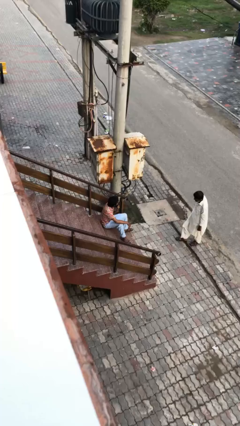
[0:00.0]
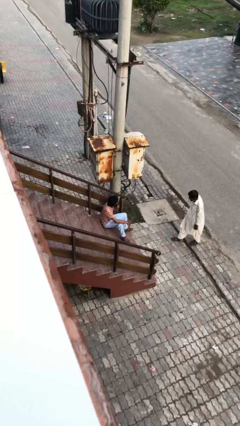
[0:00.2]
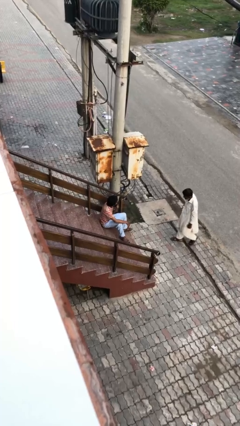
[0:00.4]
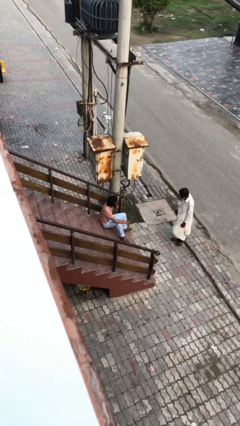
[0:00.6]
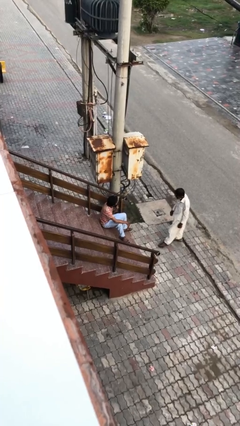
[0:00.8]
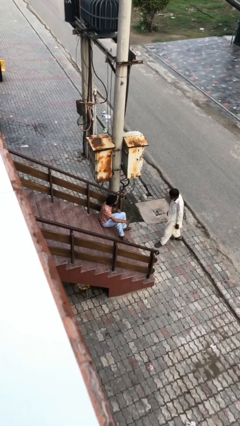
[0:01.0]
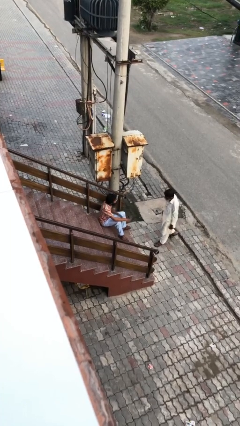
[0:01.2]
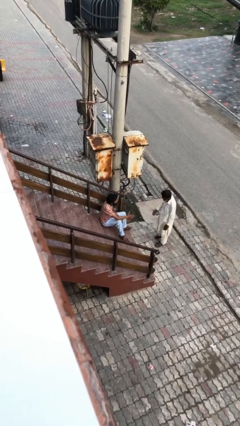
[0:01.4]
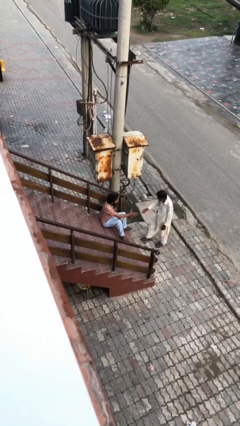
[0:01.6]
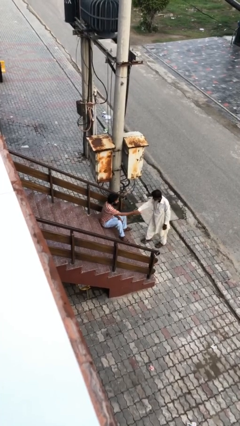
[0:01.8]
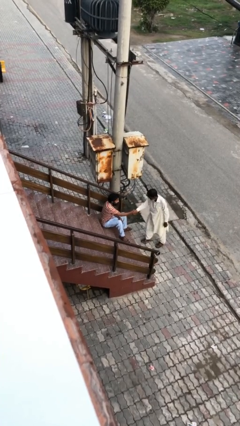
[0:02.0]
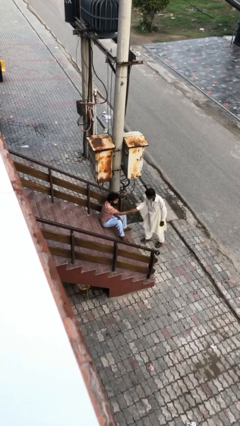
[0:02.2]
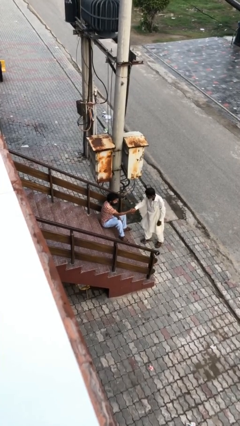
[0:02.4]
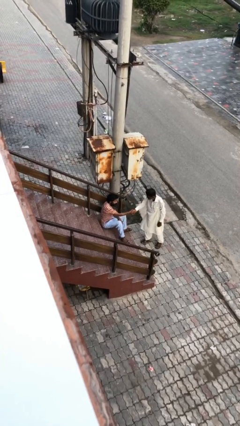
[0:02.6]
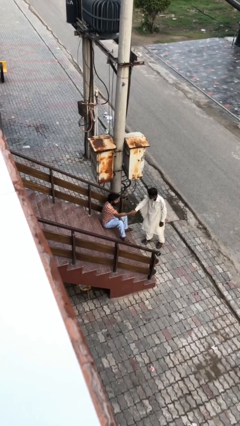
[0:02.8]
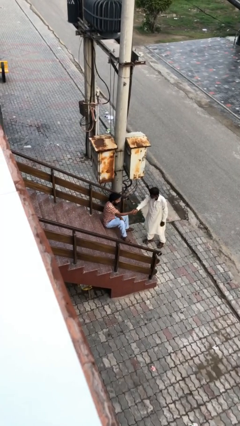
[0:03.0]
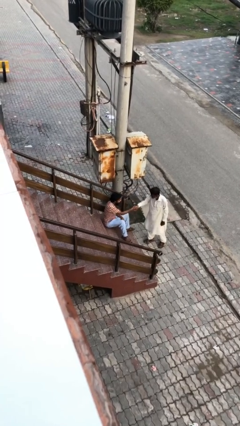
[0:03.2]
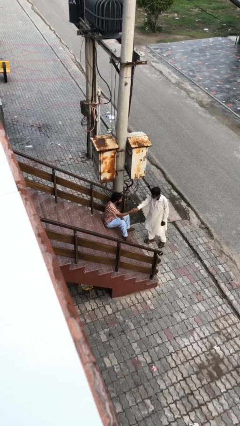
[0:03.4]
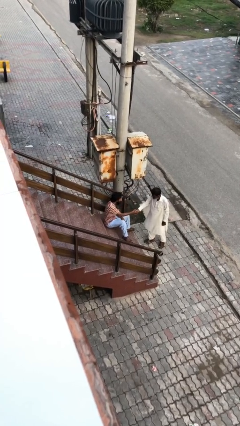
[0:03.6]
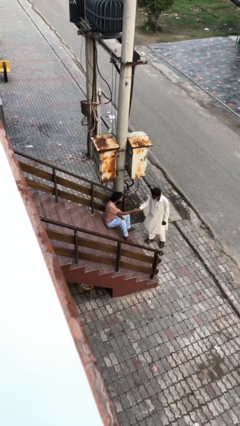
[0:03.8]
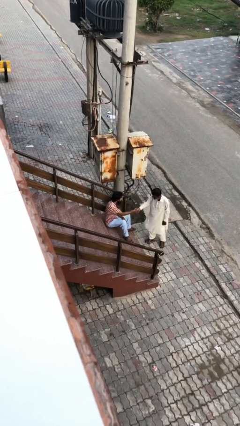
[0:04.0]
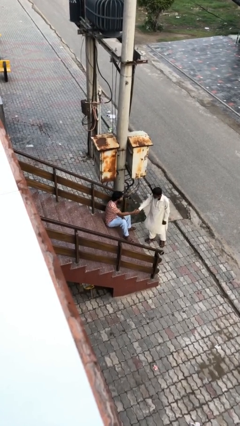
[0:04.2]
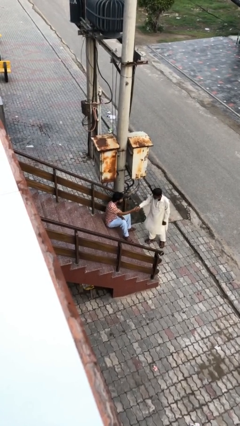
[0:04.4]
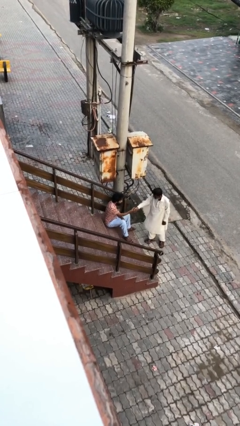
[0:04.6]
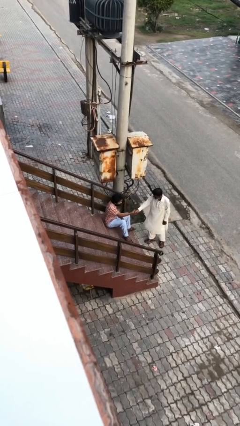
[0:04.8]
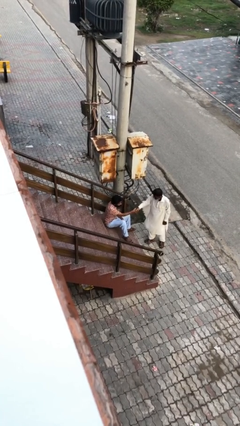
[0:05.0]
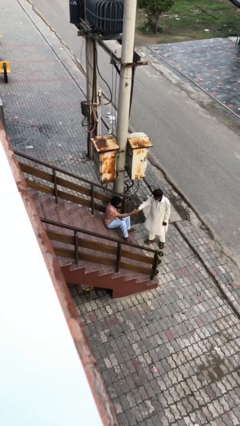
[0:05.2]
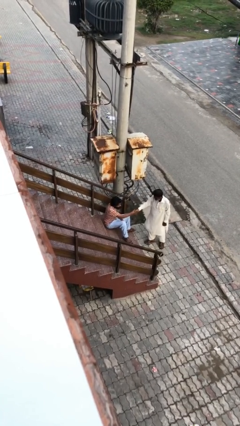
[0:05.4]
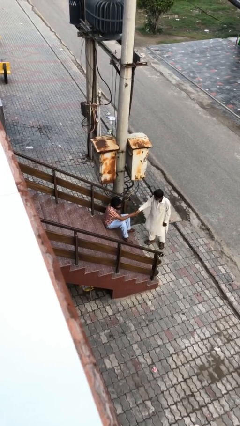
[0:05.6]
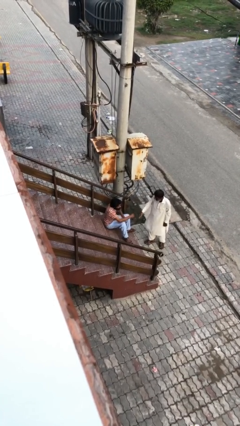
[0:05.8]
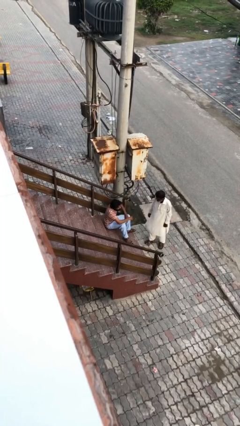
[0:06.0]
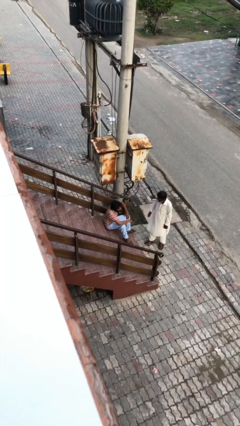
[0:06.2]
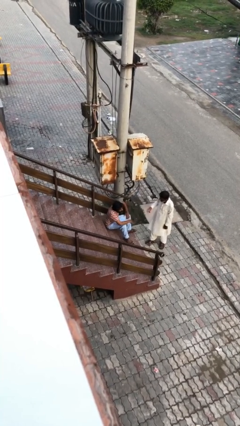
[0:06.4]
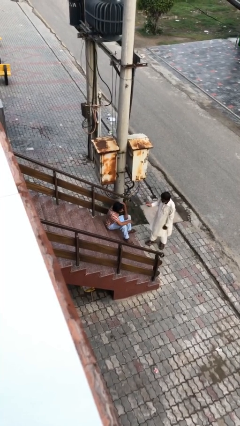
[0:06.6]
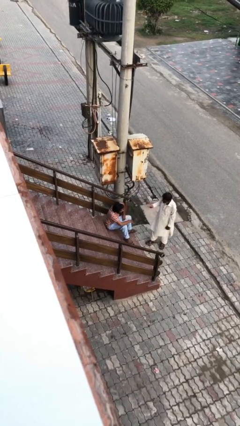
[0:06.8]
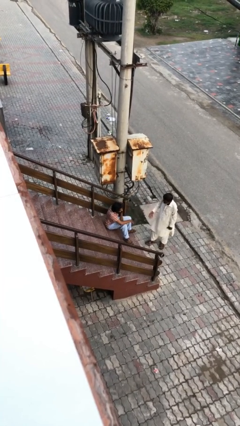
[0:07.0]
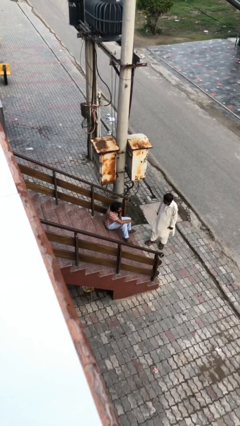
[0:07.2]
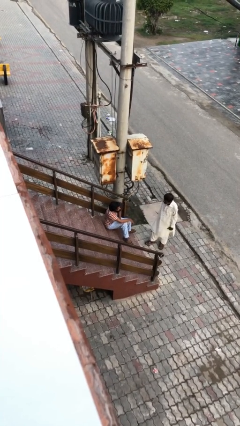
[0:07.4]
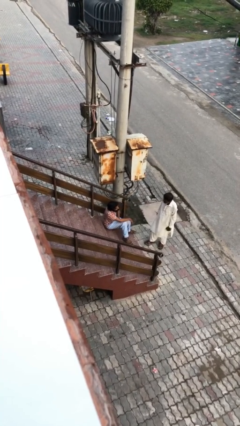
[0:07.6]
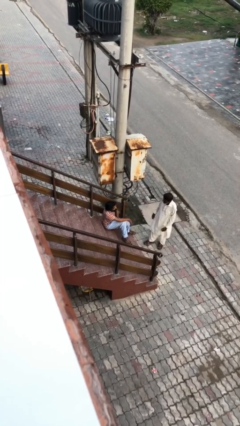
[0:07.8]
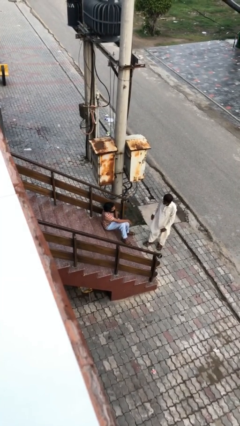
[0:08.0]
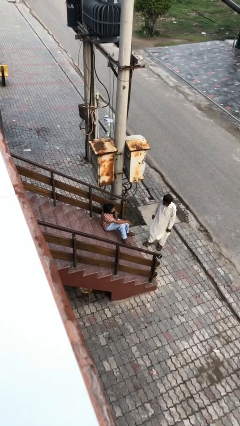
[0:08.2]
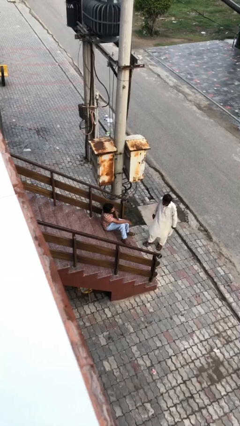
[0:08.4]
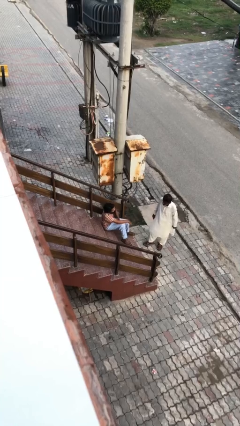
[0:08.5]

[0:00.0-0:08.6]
person shakes hand

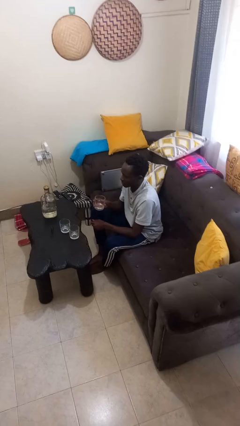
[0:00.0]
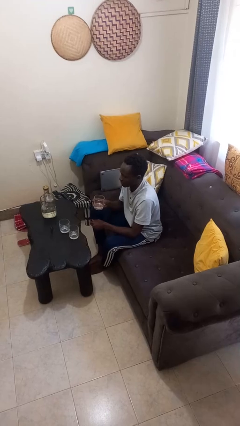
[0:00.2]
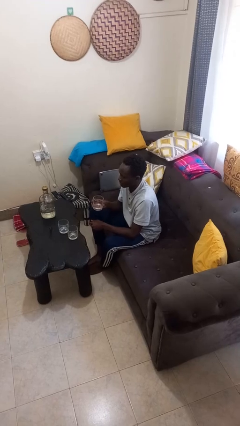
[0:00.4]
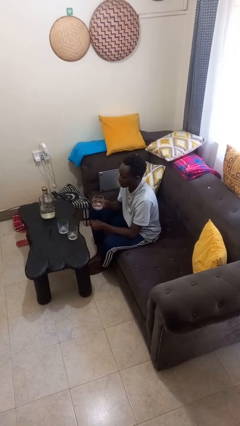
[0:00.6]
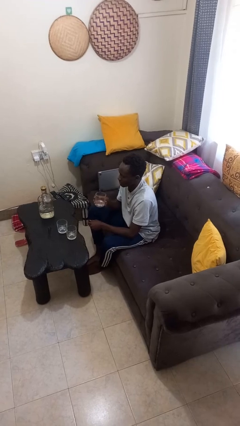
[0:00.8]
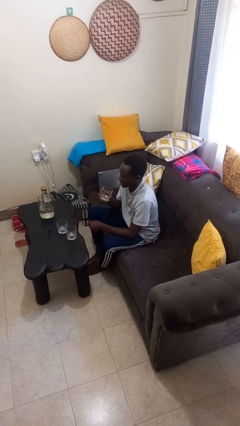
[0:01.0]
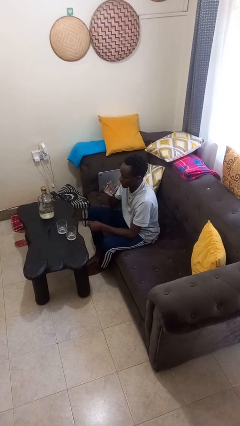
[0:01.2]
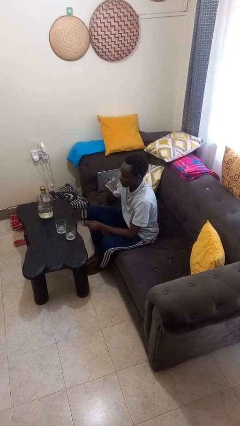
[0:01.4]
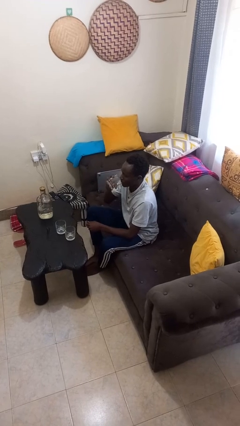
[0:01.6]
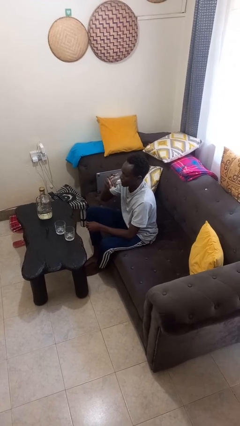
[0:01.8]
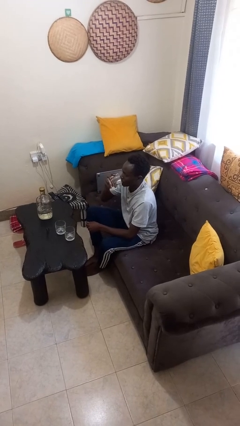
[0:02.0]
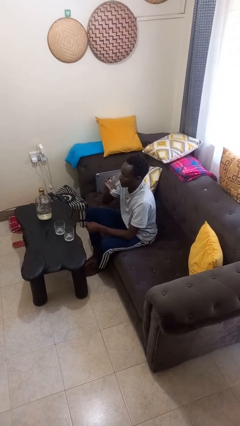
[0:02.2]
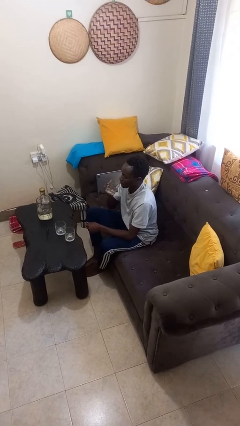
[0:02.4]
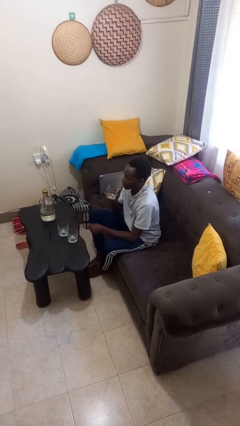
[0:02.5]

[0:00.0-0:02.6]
person drinks from shotglass

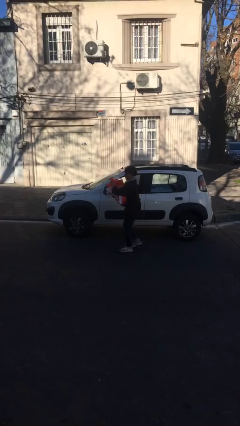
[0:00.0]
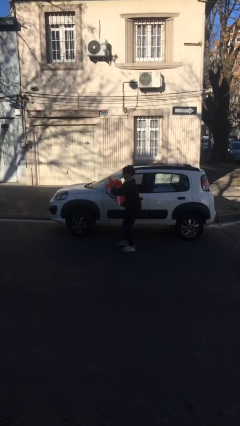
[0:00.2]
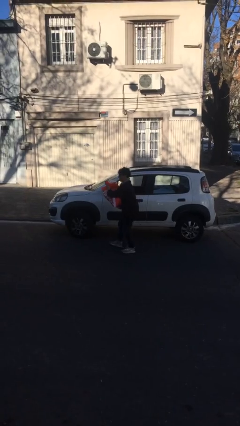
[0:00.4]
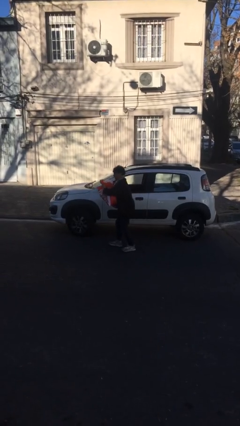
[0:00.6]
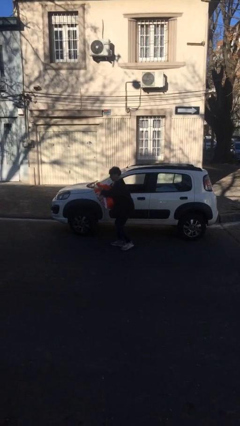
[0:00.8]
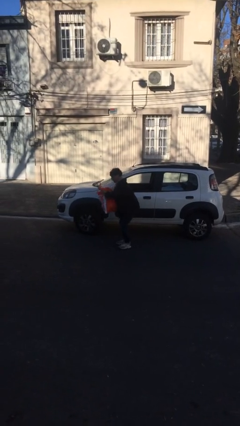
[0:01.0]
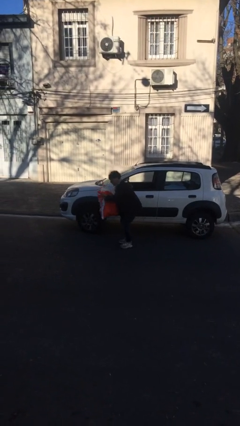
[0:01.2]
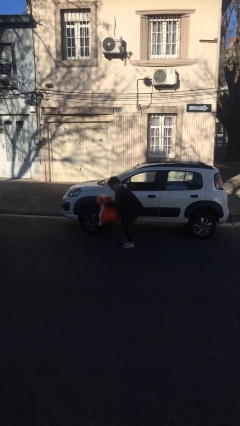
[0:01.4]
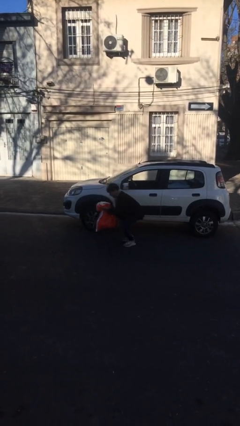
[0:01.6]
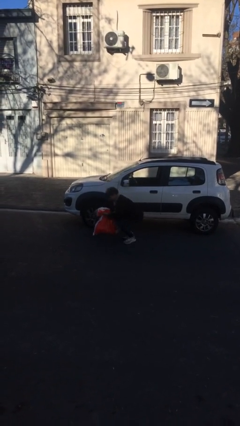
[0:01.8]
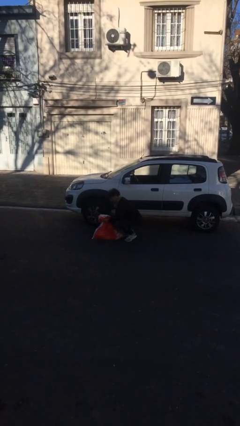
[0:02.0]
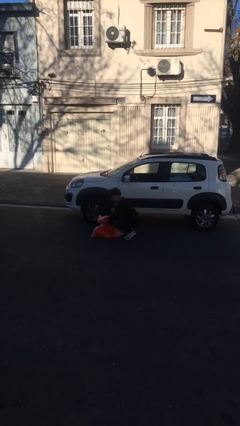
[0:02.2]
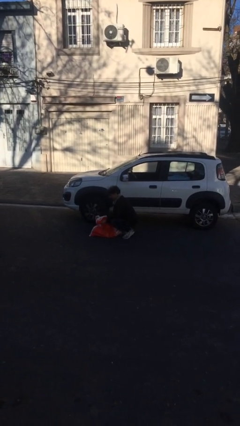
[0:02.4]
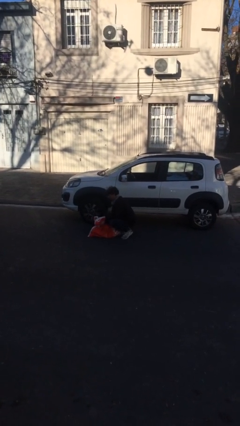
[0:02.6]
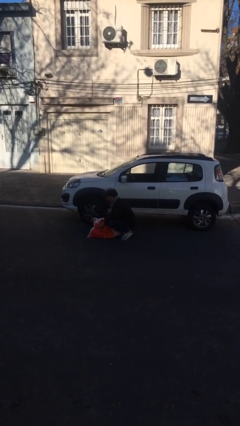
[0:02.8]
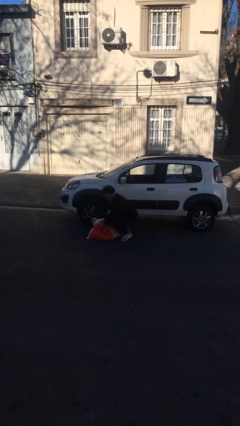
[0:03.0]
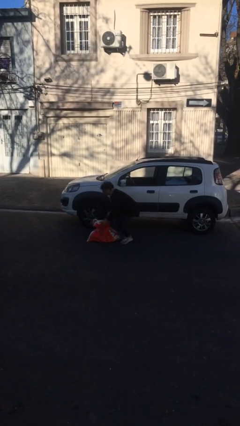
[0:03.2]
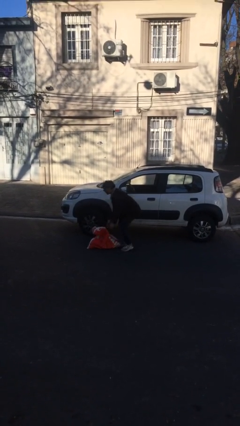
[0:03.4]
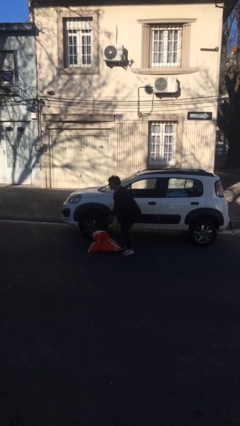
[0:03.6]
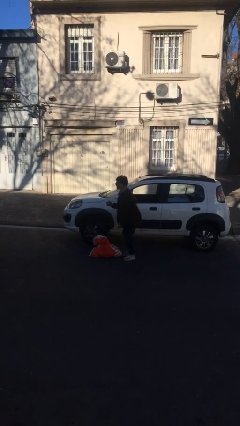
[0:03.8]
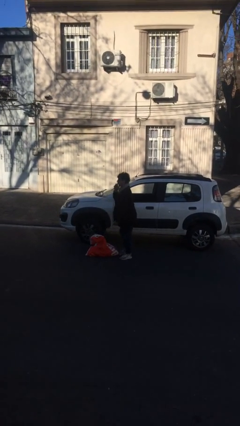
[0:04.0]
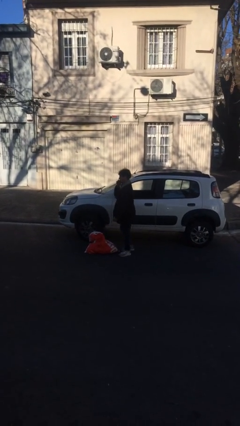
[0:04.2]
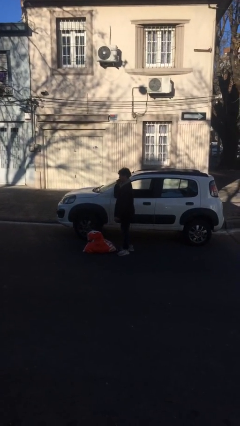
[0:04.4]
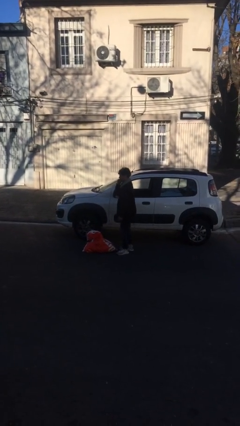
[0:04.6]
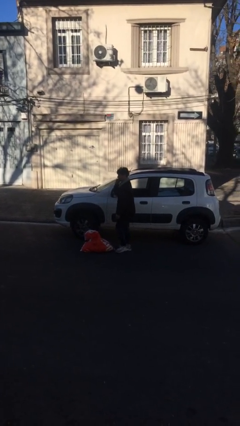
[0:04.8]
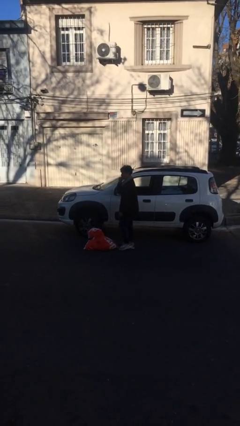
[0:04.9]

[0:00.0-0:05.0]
person puts down object on floor

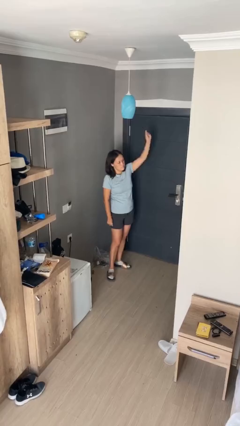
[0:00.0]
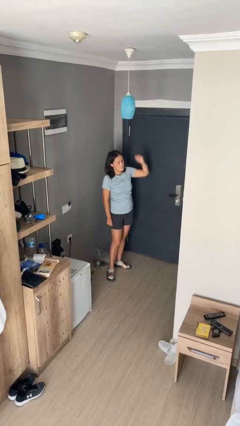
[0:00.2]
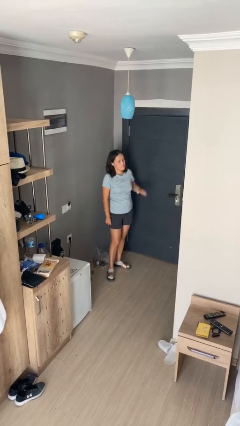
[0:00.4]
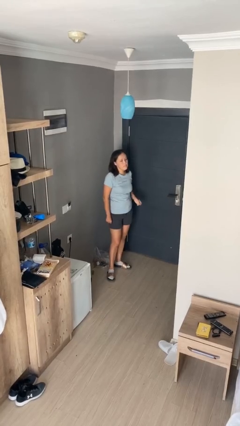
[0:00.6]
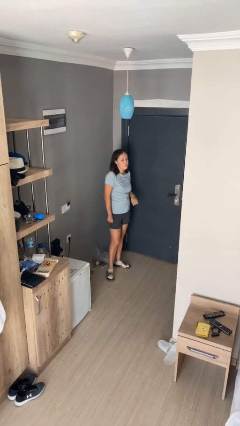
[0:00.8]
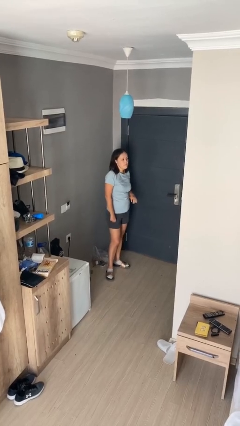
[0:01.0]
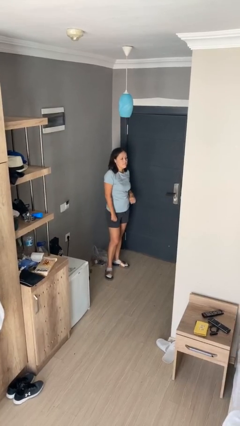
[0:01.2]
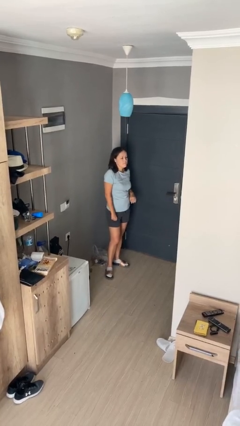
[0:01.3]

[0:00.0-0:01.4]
person gestures lower hand
